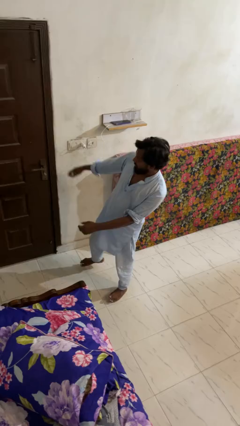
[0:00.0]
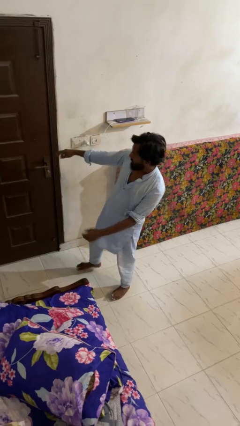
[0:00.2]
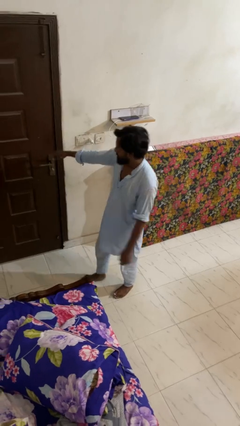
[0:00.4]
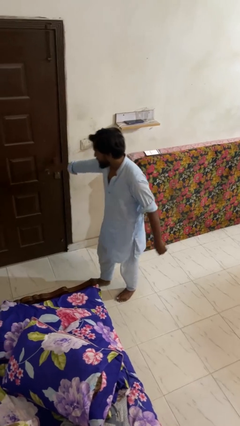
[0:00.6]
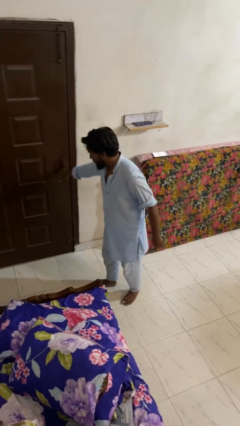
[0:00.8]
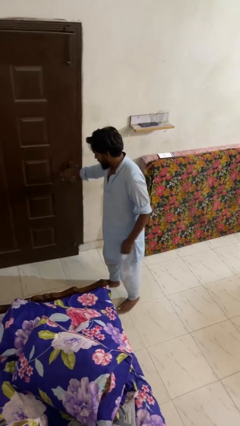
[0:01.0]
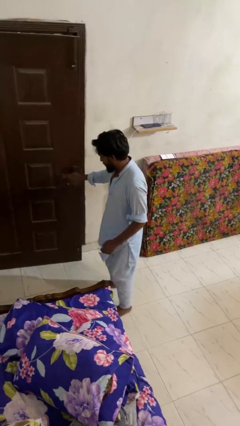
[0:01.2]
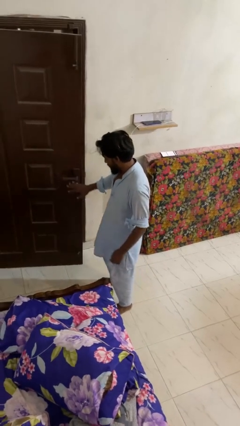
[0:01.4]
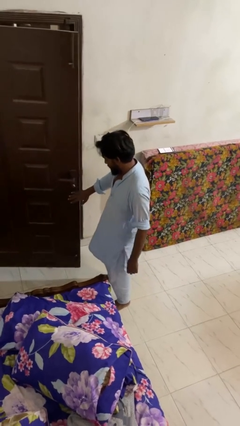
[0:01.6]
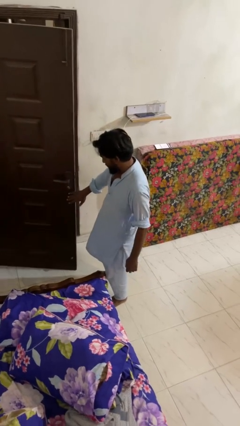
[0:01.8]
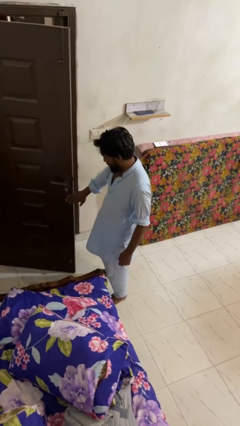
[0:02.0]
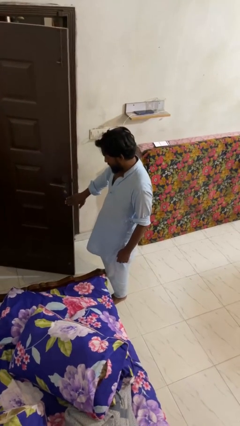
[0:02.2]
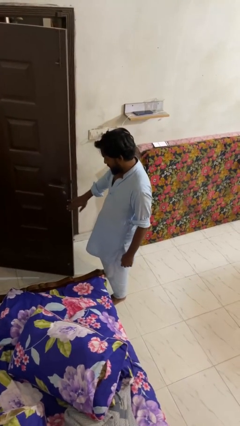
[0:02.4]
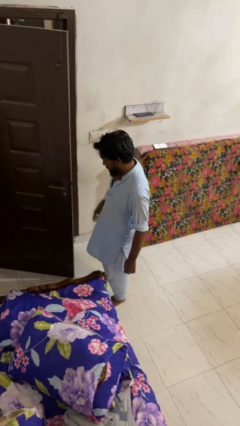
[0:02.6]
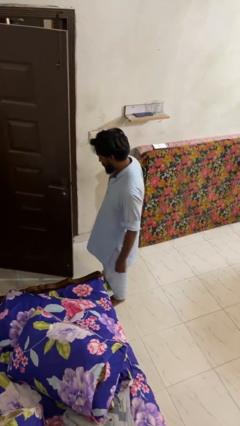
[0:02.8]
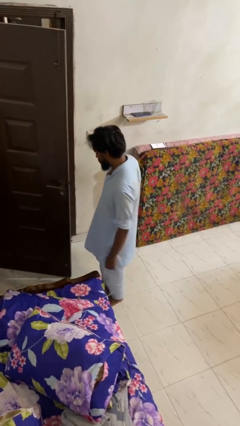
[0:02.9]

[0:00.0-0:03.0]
person opens facility door

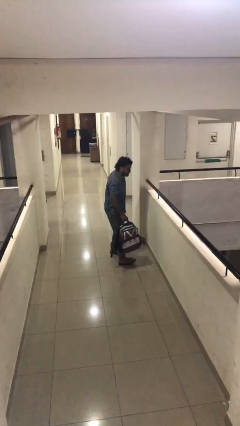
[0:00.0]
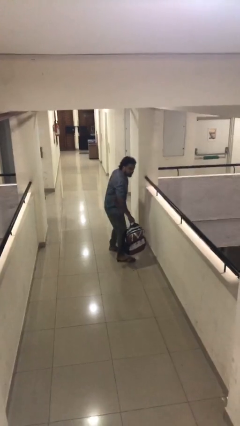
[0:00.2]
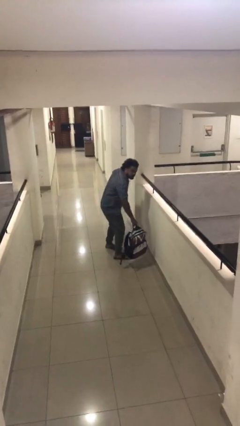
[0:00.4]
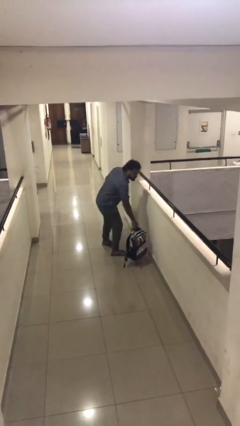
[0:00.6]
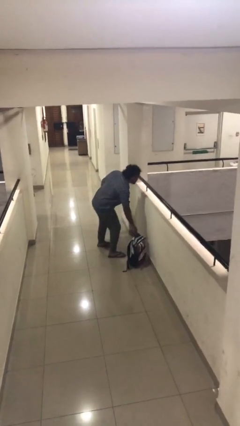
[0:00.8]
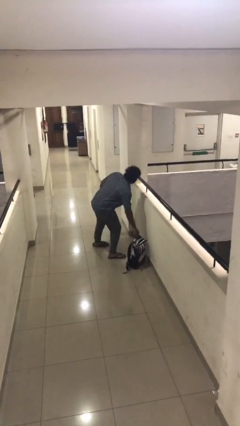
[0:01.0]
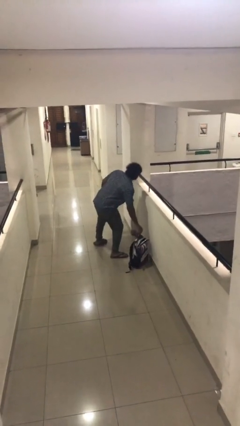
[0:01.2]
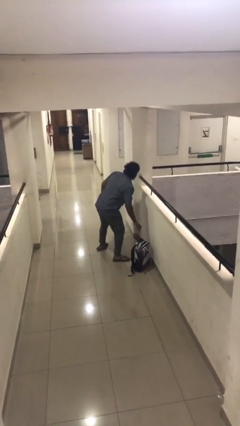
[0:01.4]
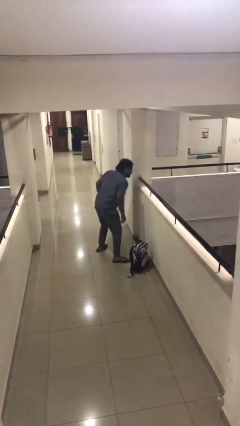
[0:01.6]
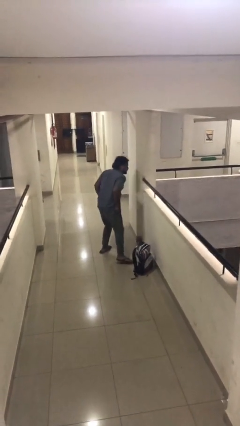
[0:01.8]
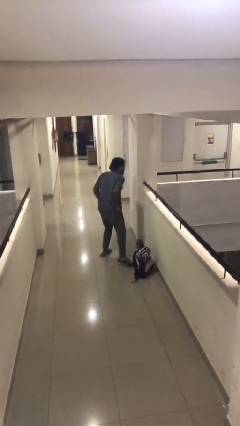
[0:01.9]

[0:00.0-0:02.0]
person puts down object on floor

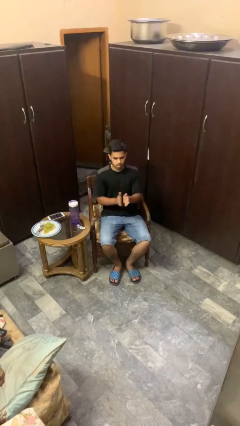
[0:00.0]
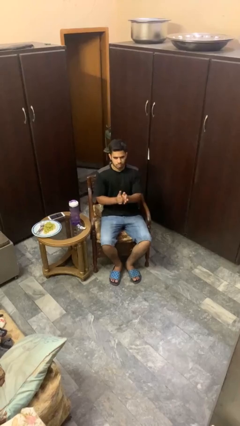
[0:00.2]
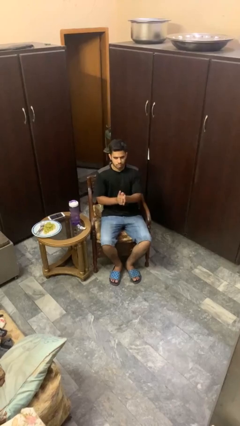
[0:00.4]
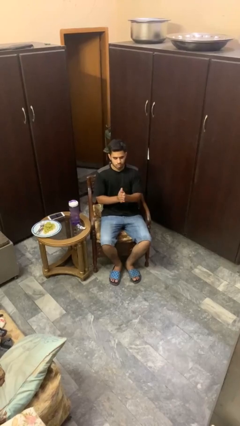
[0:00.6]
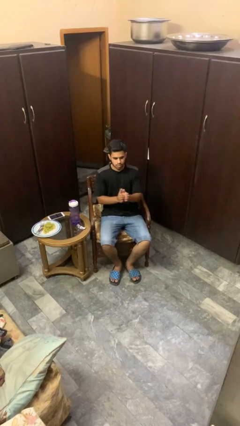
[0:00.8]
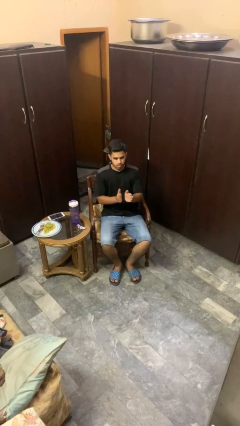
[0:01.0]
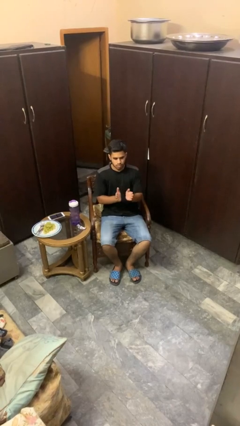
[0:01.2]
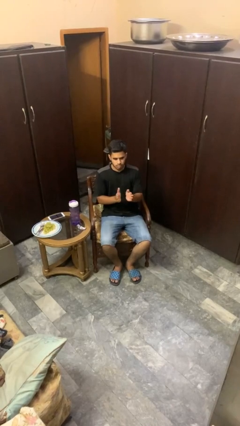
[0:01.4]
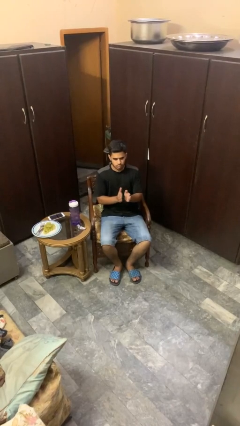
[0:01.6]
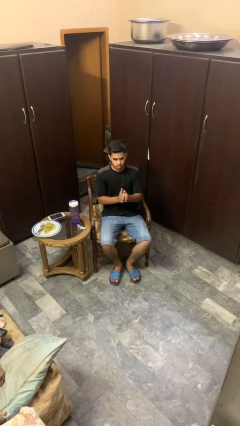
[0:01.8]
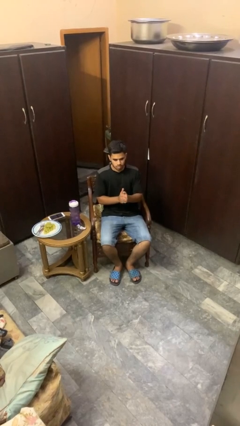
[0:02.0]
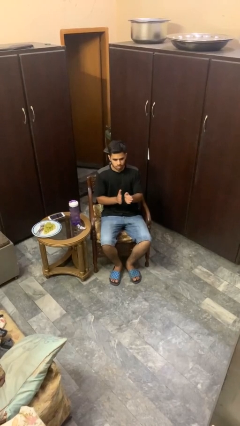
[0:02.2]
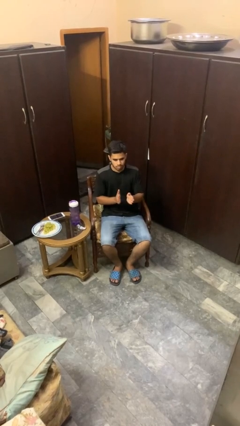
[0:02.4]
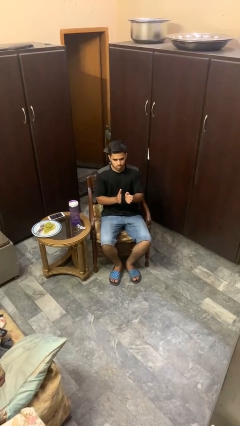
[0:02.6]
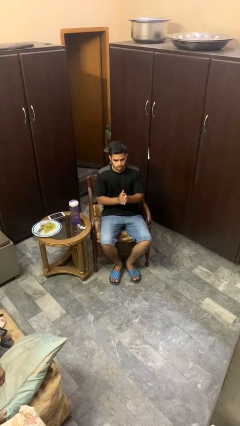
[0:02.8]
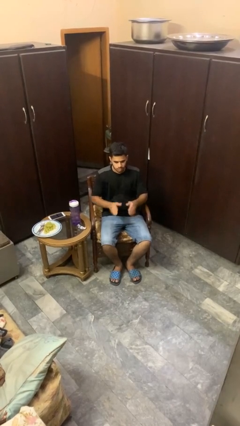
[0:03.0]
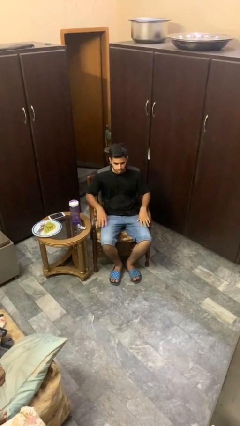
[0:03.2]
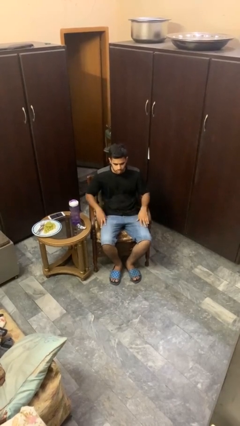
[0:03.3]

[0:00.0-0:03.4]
person claps hands

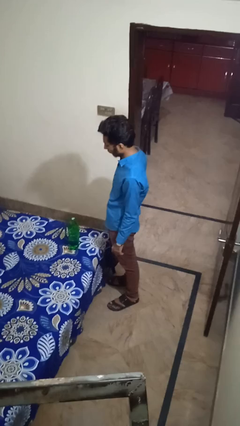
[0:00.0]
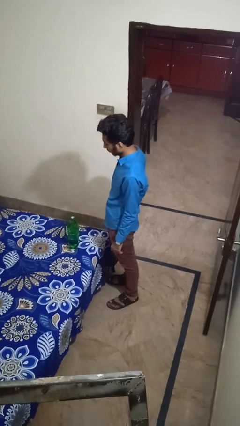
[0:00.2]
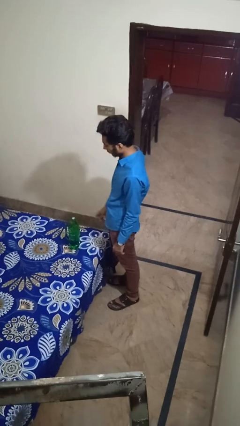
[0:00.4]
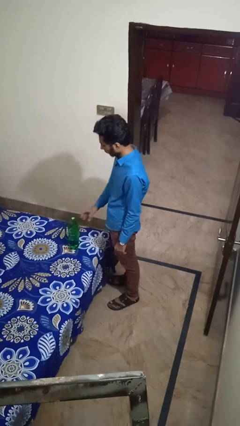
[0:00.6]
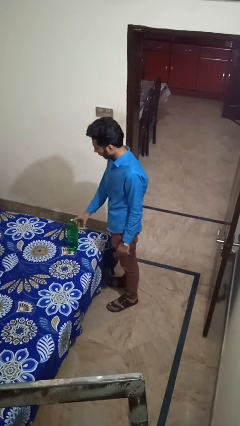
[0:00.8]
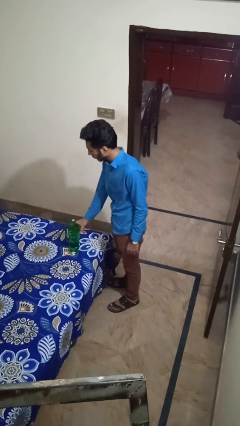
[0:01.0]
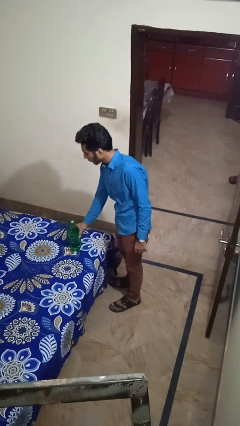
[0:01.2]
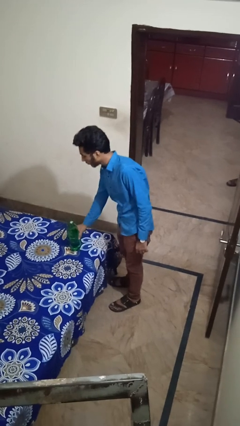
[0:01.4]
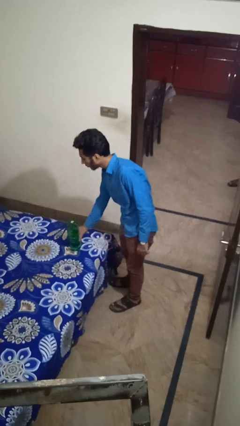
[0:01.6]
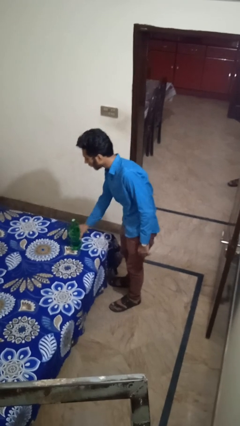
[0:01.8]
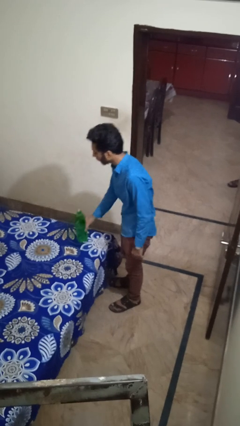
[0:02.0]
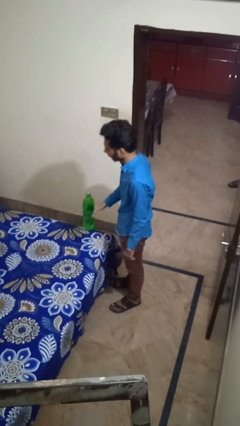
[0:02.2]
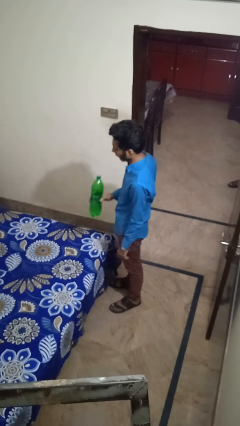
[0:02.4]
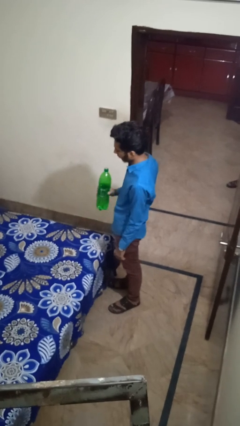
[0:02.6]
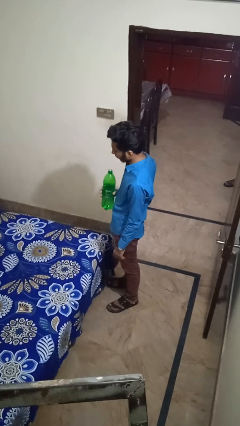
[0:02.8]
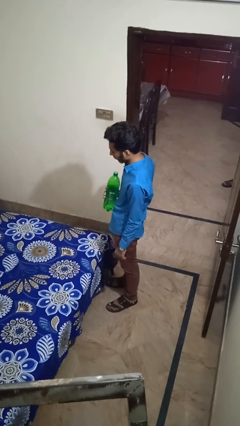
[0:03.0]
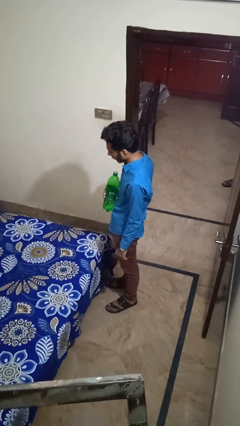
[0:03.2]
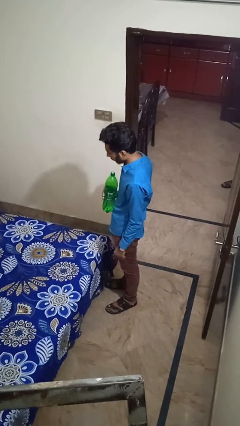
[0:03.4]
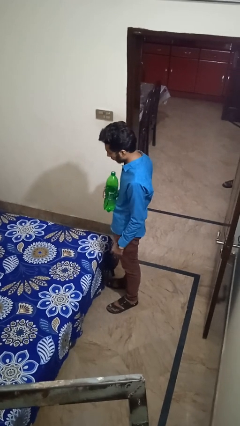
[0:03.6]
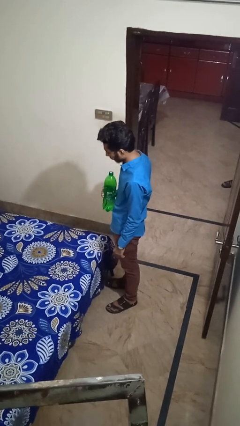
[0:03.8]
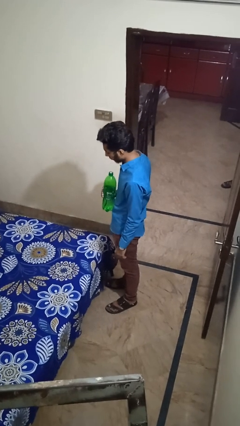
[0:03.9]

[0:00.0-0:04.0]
person picks up object from bed

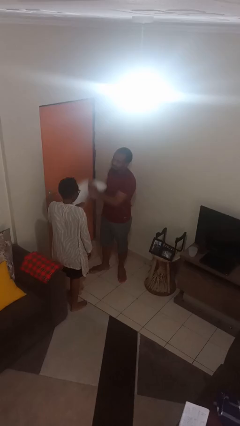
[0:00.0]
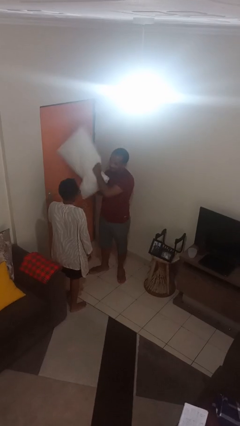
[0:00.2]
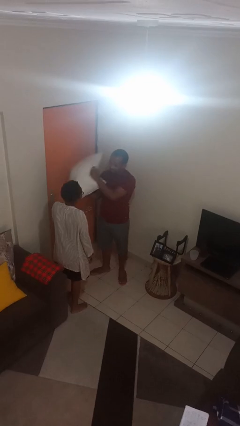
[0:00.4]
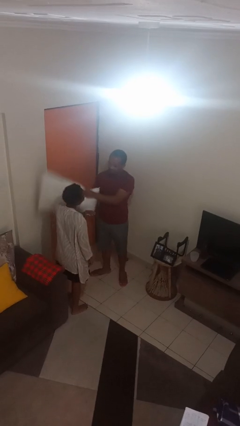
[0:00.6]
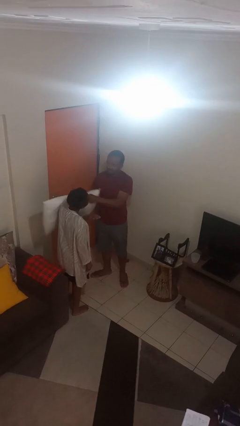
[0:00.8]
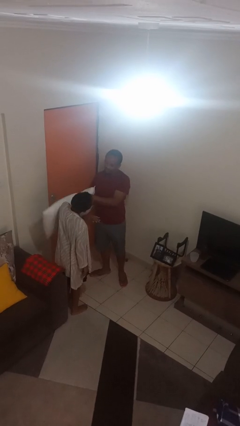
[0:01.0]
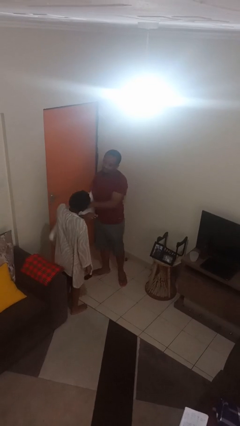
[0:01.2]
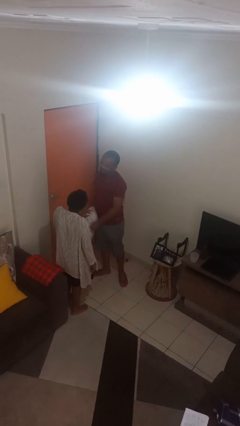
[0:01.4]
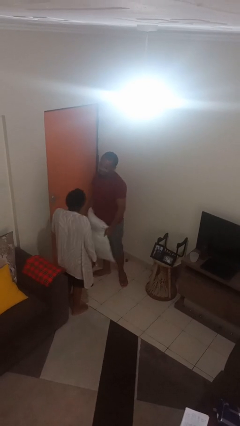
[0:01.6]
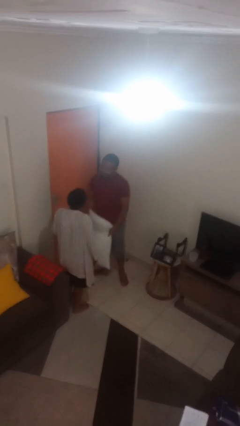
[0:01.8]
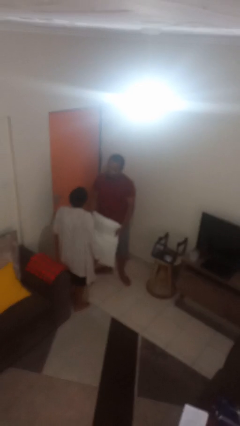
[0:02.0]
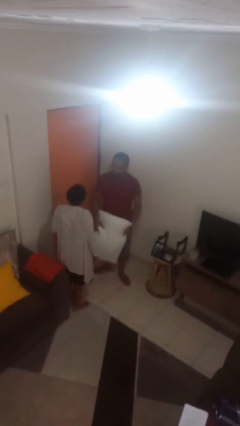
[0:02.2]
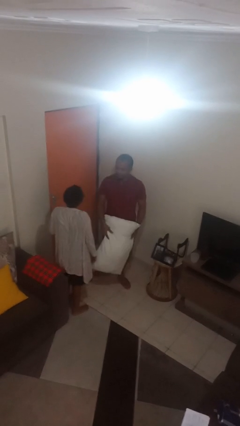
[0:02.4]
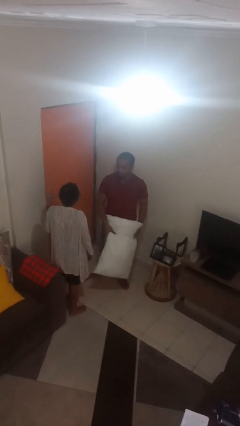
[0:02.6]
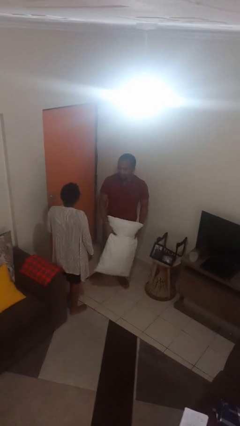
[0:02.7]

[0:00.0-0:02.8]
person hits person with pillow

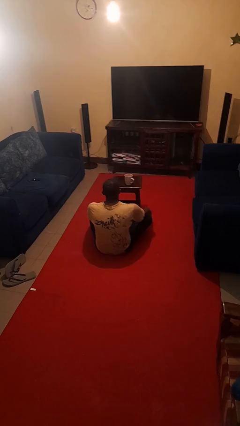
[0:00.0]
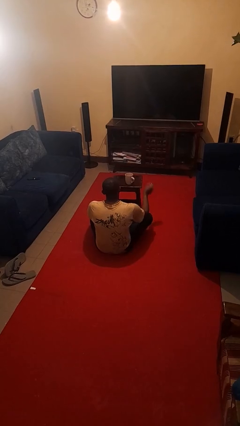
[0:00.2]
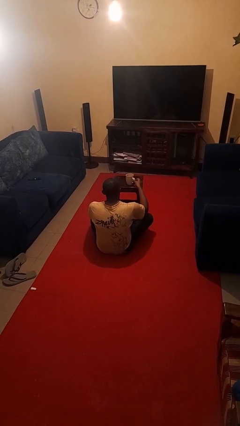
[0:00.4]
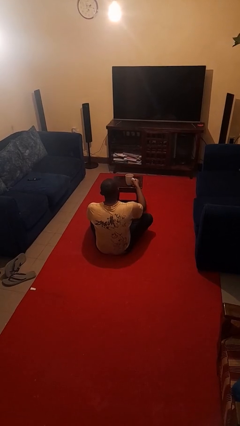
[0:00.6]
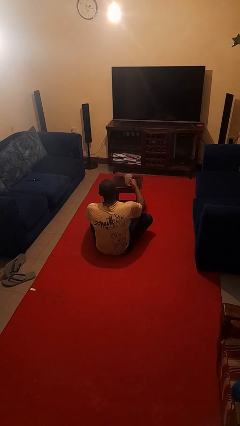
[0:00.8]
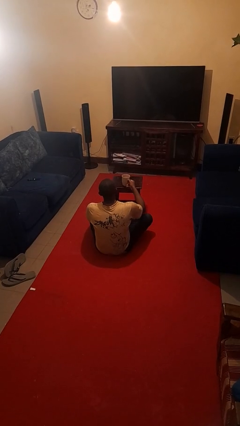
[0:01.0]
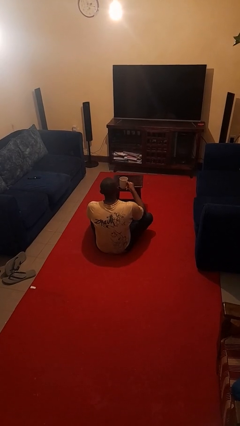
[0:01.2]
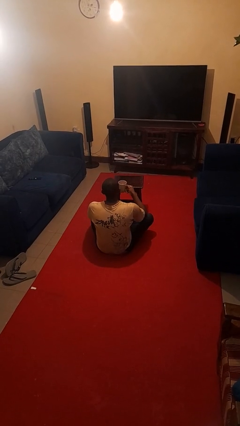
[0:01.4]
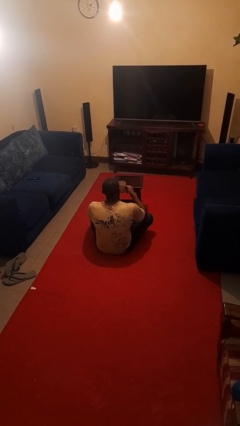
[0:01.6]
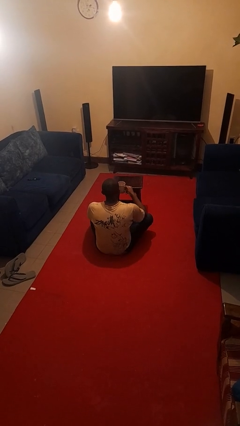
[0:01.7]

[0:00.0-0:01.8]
person picks up object from table

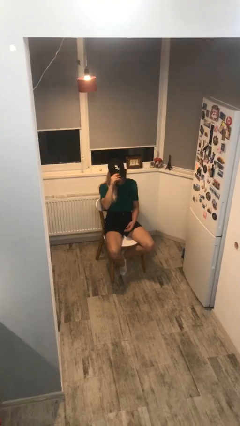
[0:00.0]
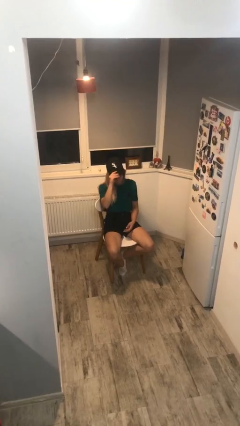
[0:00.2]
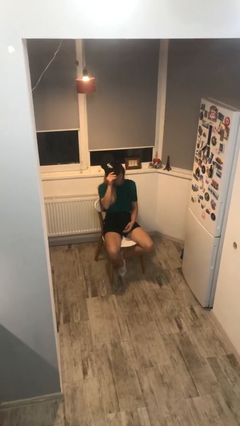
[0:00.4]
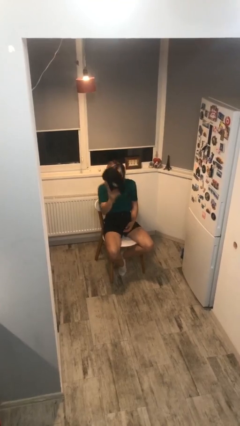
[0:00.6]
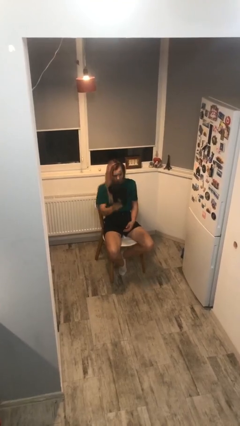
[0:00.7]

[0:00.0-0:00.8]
person takes off hat
